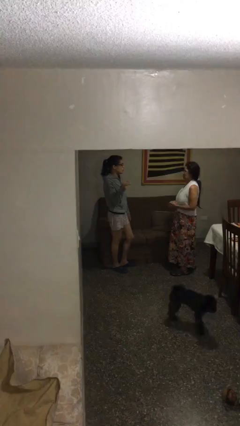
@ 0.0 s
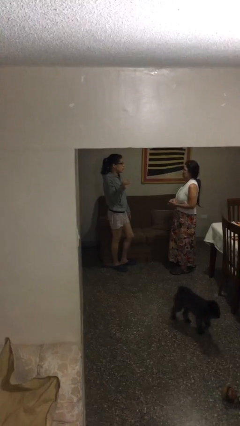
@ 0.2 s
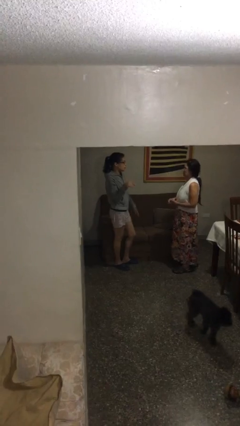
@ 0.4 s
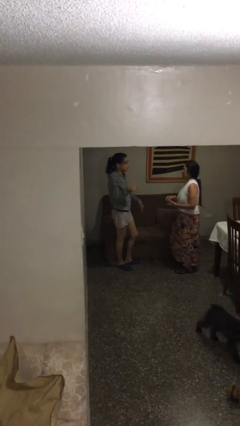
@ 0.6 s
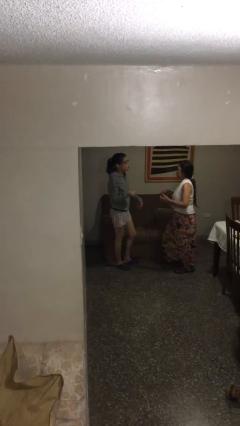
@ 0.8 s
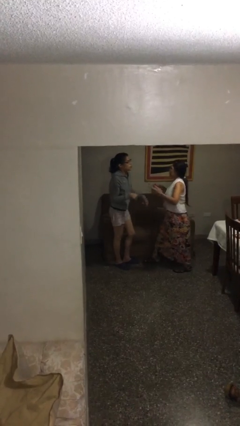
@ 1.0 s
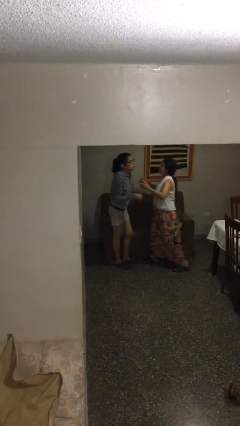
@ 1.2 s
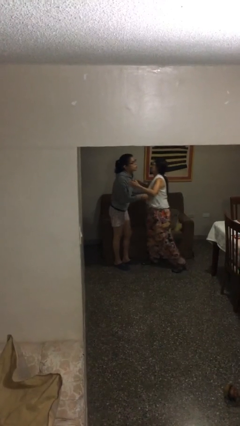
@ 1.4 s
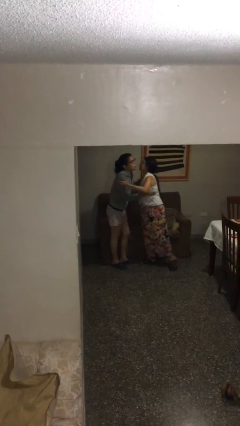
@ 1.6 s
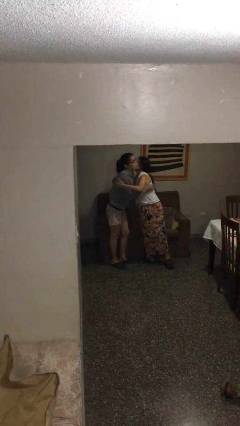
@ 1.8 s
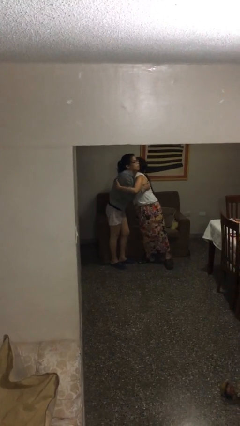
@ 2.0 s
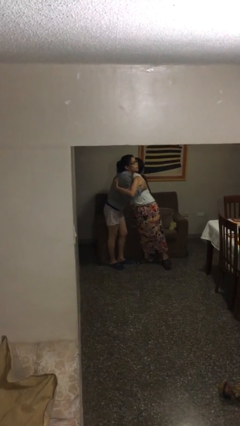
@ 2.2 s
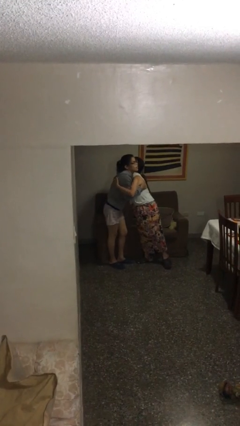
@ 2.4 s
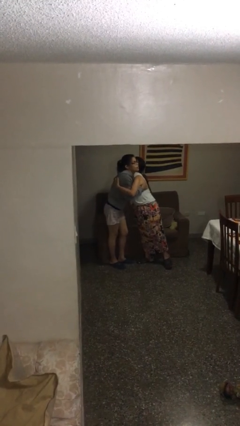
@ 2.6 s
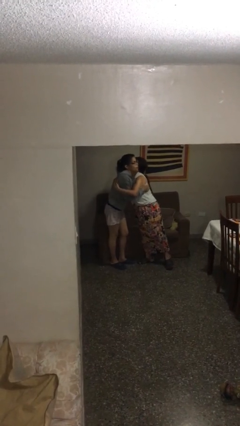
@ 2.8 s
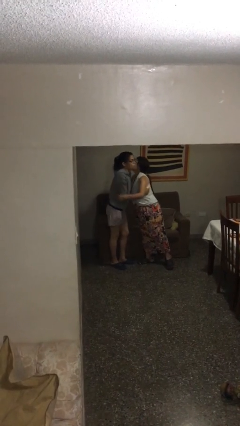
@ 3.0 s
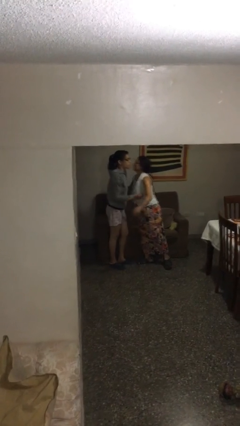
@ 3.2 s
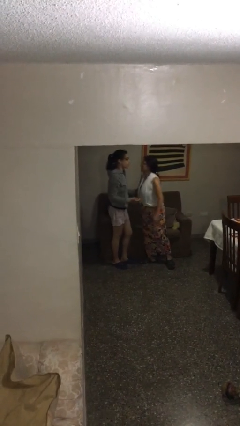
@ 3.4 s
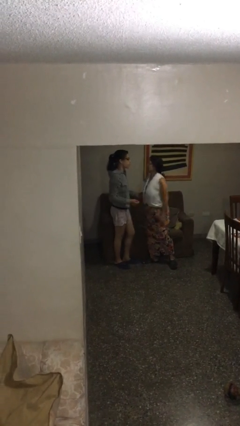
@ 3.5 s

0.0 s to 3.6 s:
person embraces person

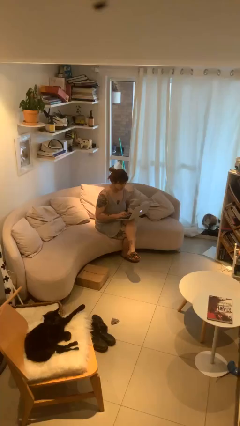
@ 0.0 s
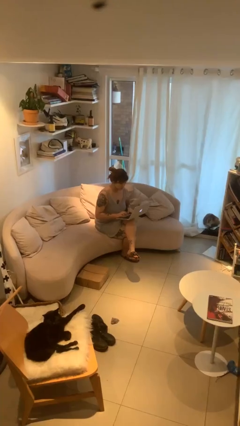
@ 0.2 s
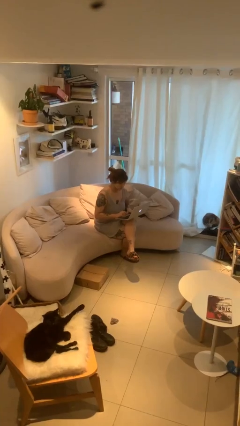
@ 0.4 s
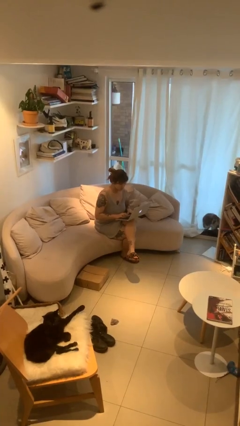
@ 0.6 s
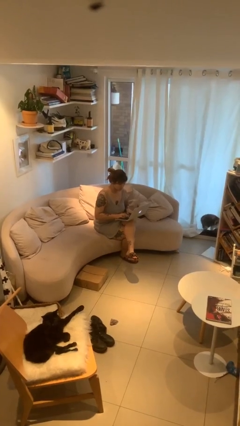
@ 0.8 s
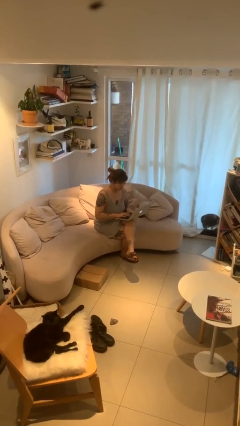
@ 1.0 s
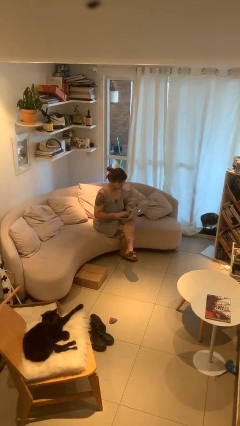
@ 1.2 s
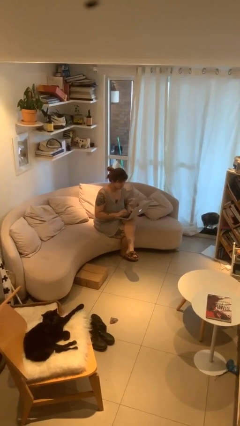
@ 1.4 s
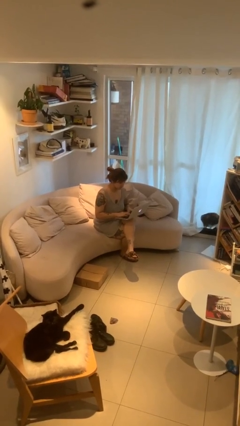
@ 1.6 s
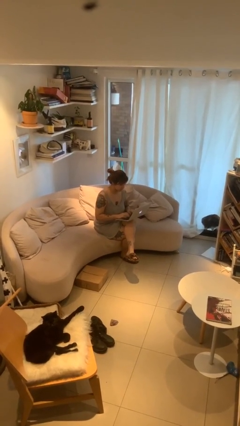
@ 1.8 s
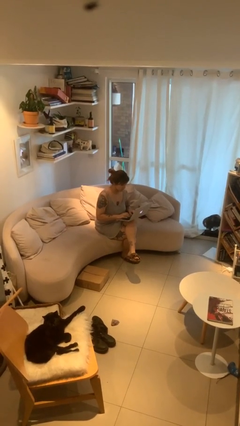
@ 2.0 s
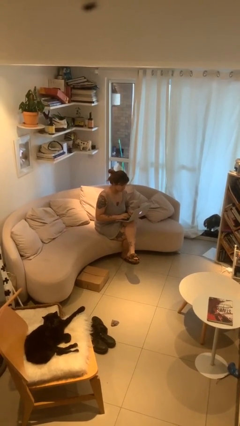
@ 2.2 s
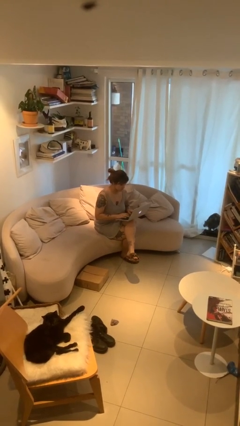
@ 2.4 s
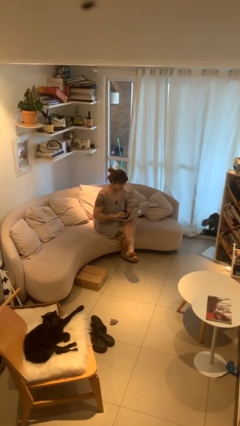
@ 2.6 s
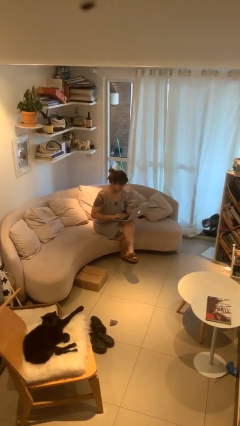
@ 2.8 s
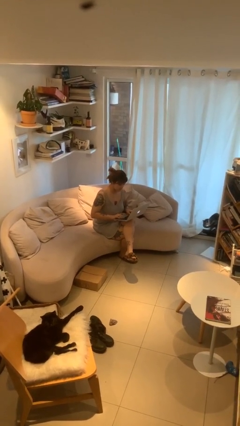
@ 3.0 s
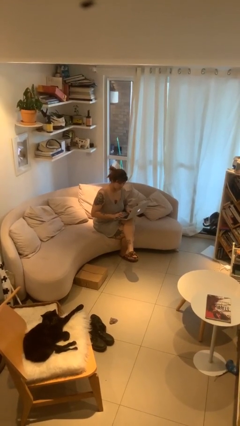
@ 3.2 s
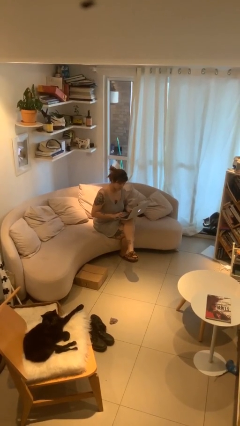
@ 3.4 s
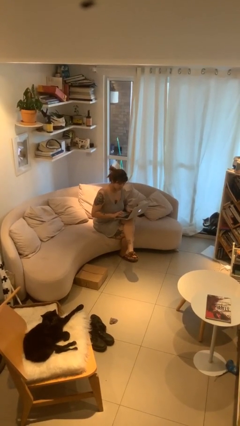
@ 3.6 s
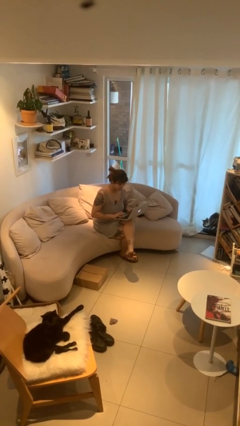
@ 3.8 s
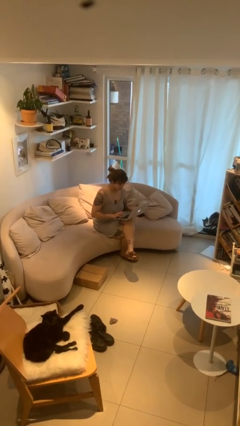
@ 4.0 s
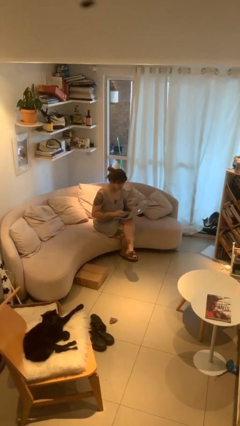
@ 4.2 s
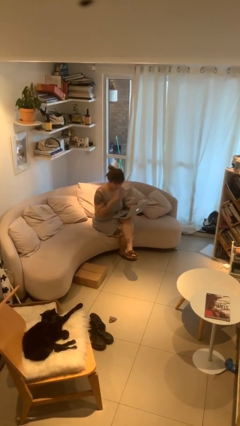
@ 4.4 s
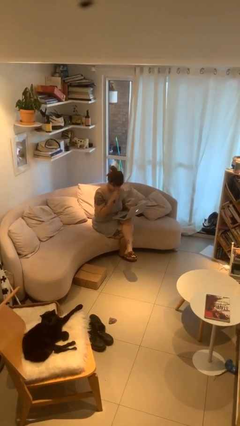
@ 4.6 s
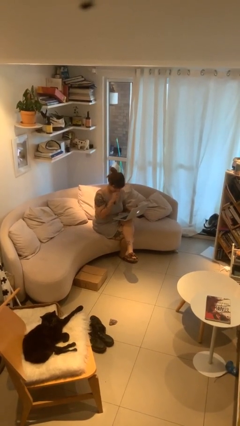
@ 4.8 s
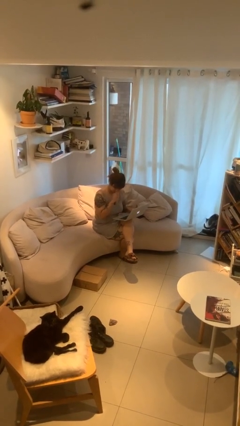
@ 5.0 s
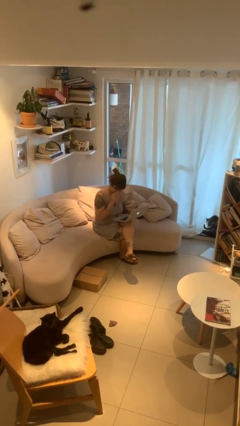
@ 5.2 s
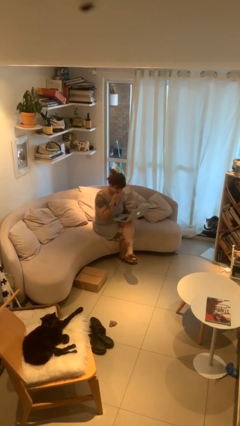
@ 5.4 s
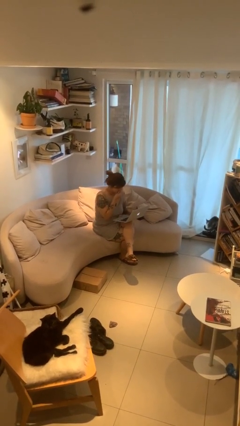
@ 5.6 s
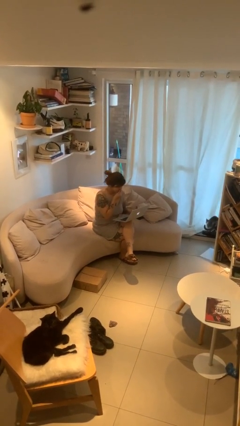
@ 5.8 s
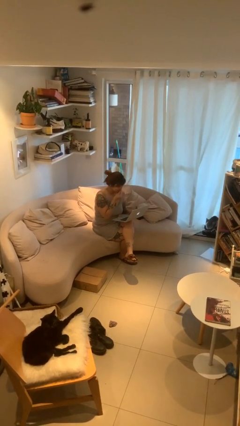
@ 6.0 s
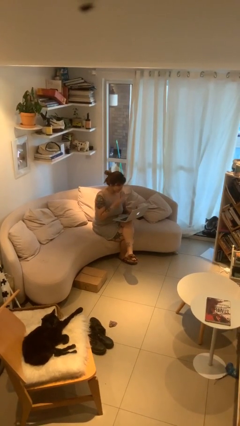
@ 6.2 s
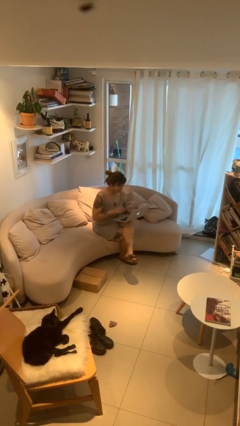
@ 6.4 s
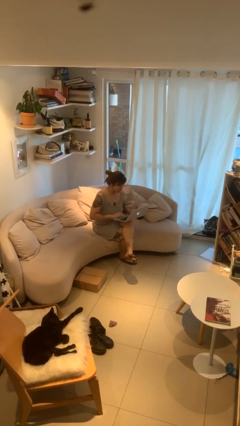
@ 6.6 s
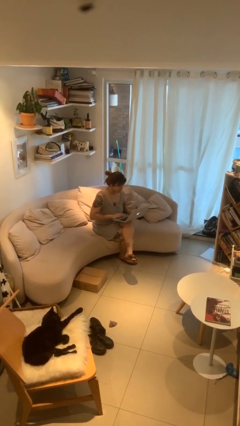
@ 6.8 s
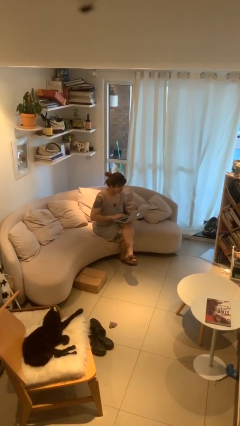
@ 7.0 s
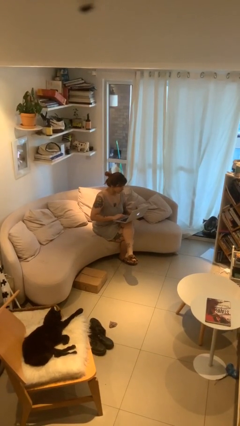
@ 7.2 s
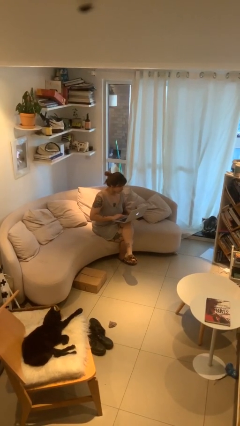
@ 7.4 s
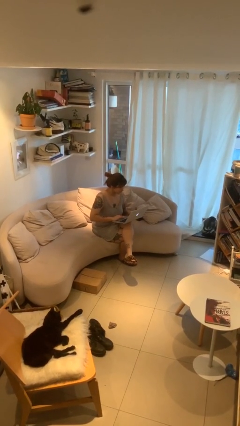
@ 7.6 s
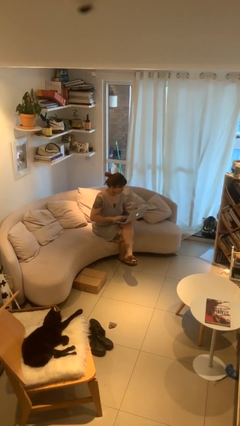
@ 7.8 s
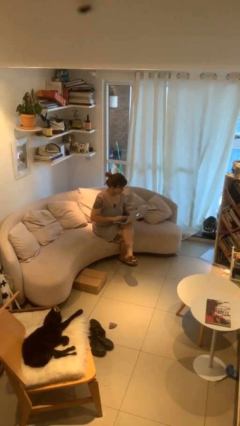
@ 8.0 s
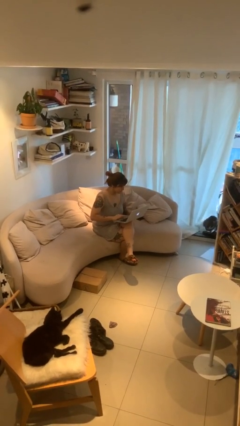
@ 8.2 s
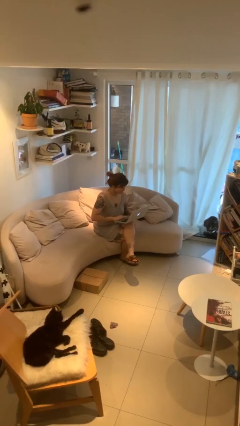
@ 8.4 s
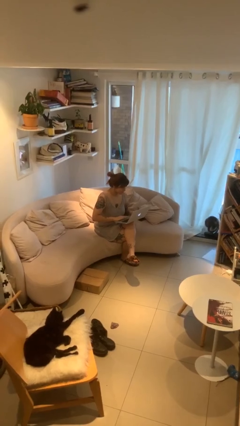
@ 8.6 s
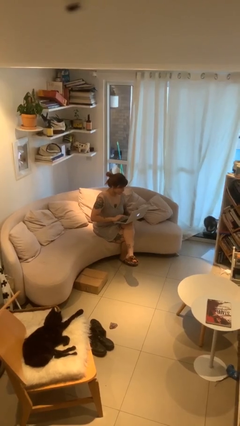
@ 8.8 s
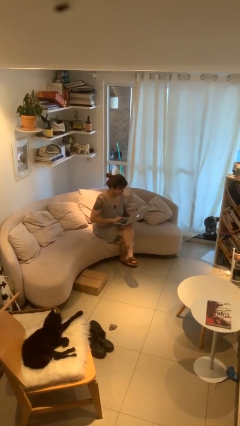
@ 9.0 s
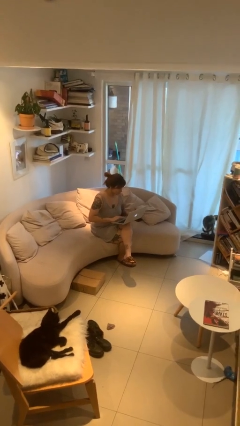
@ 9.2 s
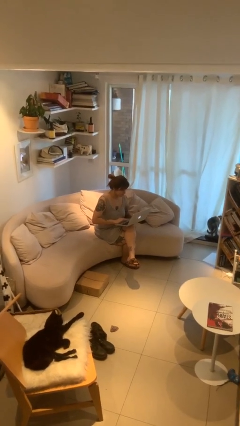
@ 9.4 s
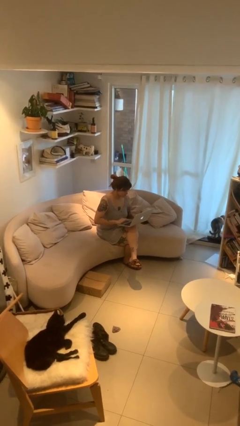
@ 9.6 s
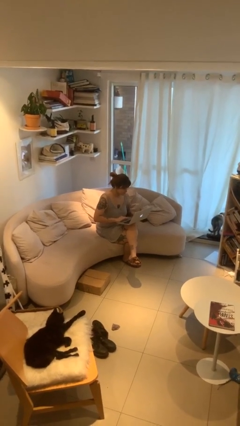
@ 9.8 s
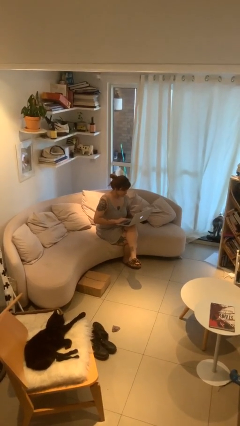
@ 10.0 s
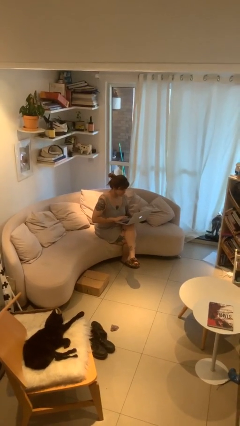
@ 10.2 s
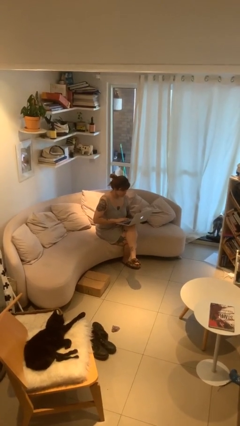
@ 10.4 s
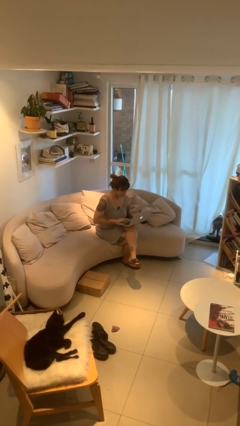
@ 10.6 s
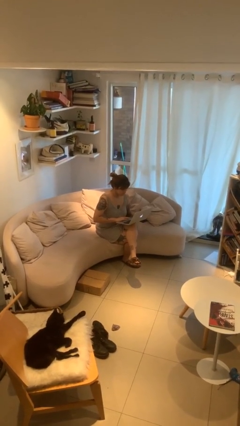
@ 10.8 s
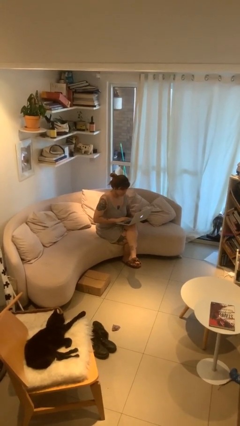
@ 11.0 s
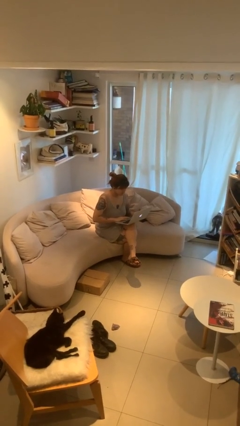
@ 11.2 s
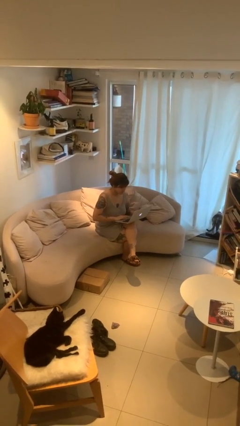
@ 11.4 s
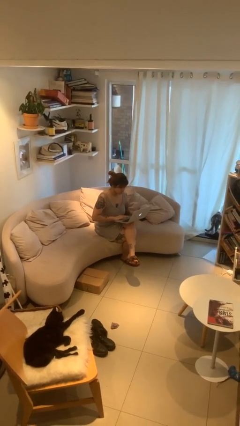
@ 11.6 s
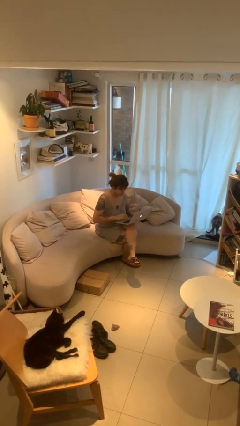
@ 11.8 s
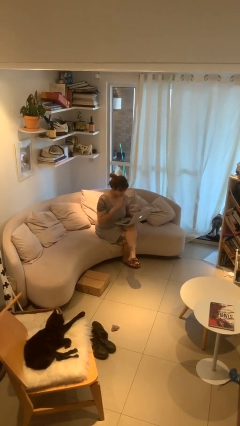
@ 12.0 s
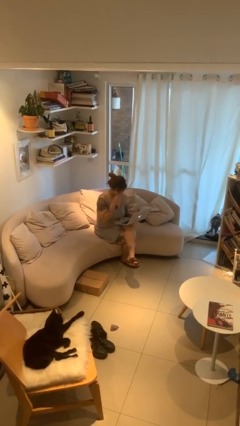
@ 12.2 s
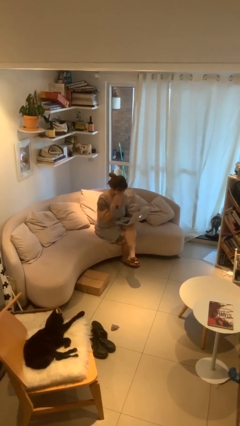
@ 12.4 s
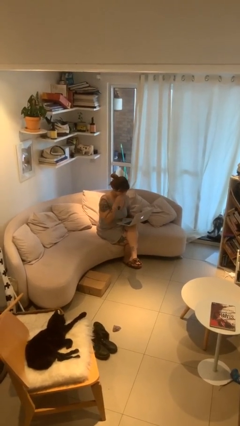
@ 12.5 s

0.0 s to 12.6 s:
person interacts with laptop

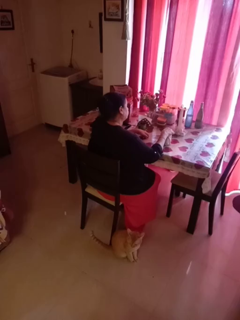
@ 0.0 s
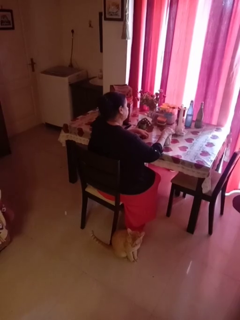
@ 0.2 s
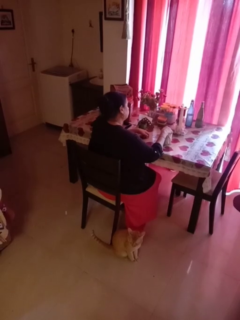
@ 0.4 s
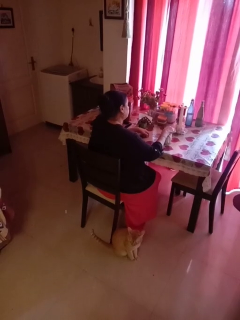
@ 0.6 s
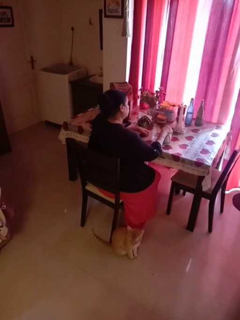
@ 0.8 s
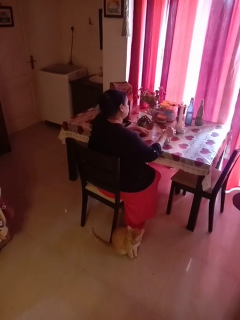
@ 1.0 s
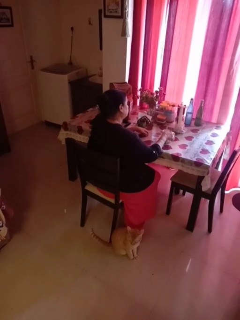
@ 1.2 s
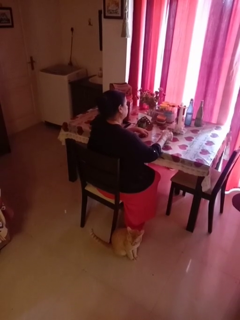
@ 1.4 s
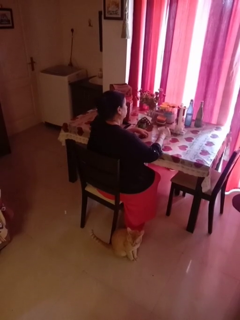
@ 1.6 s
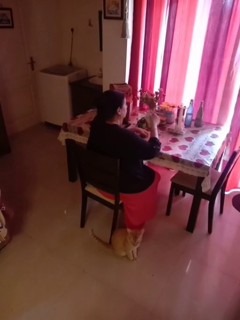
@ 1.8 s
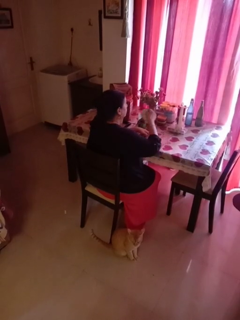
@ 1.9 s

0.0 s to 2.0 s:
person stirs mug
